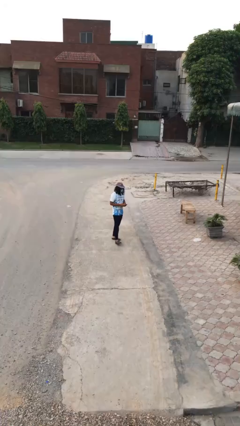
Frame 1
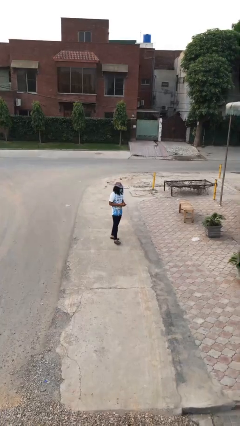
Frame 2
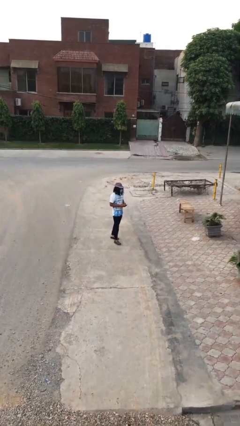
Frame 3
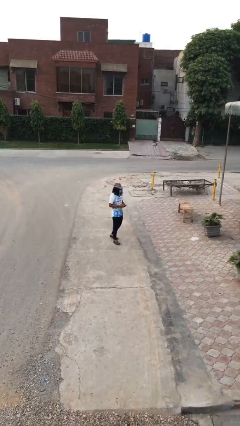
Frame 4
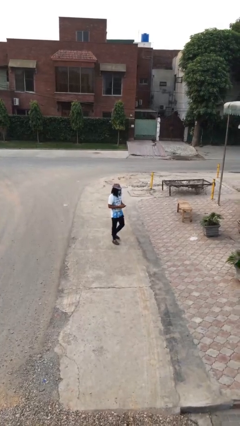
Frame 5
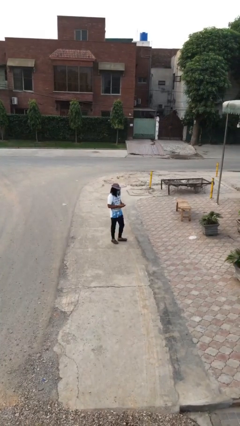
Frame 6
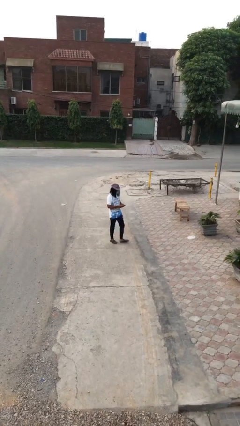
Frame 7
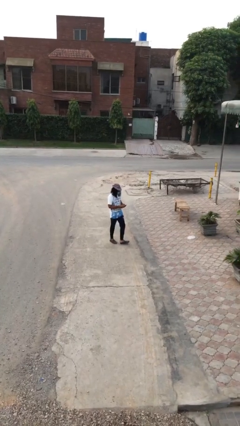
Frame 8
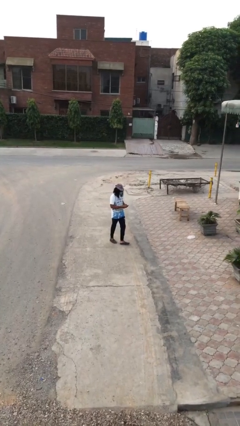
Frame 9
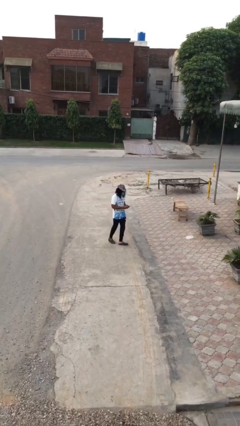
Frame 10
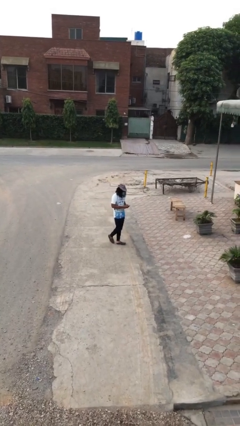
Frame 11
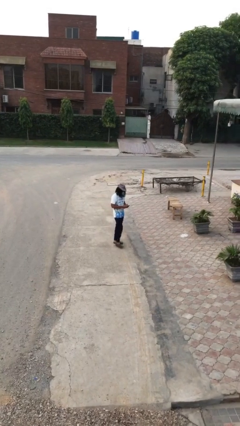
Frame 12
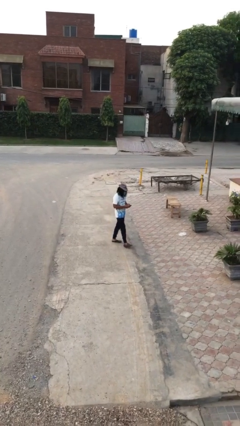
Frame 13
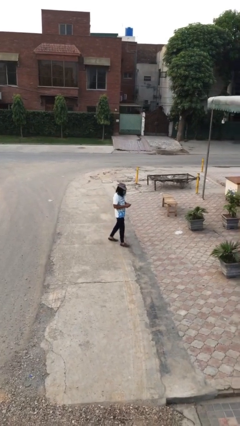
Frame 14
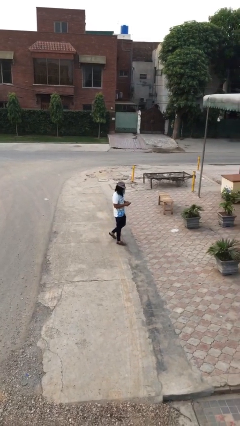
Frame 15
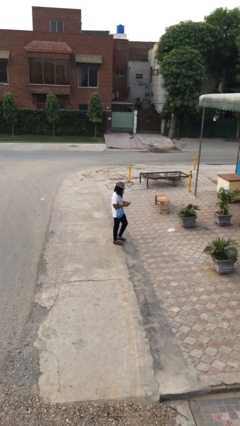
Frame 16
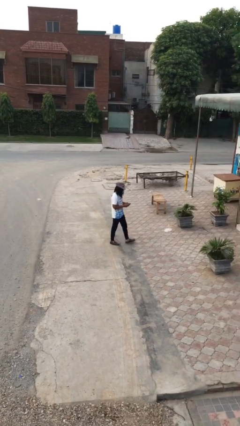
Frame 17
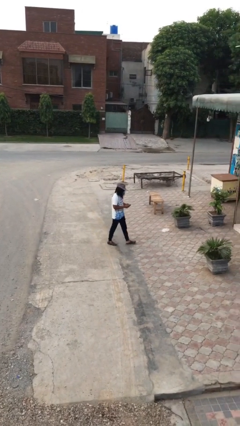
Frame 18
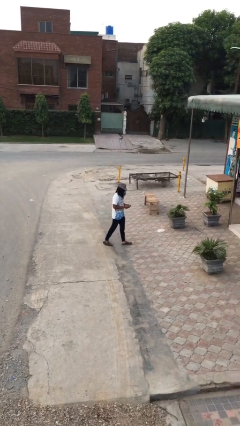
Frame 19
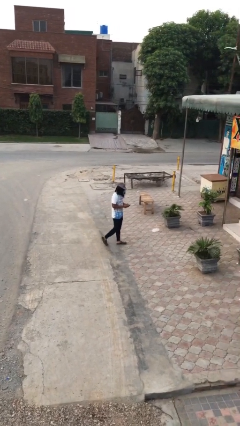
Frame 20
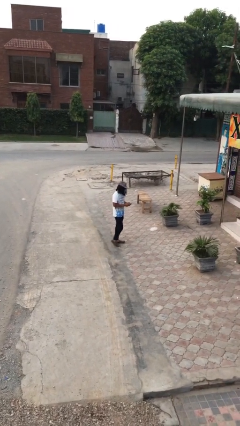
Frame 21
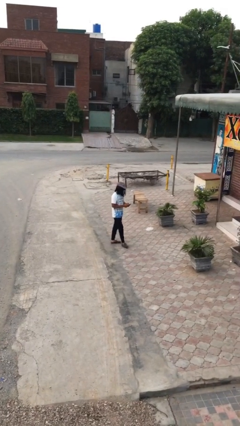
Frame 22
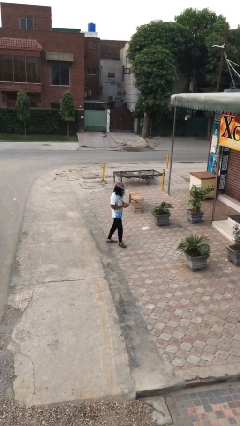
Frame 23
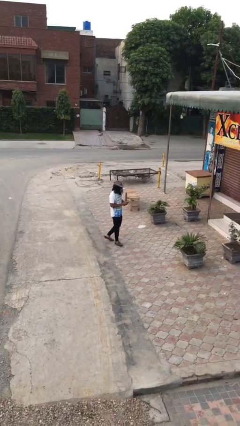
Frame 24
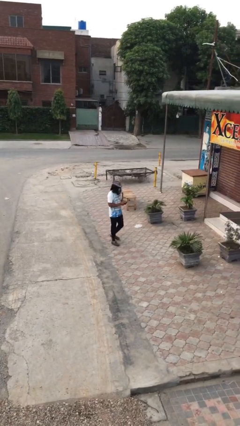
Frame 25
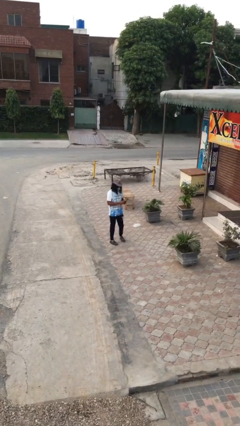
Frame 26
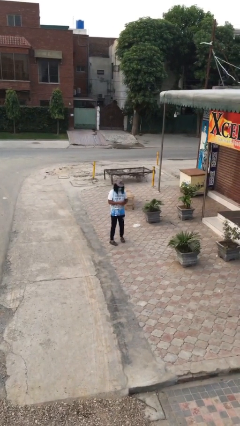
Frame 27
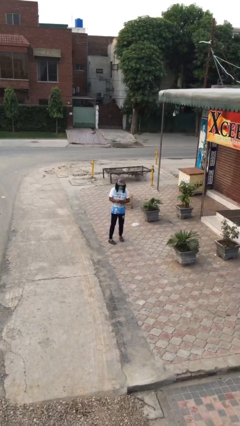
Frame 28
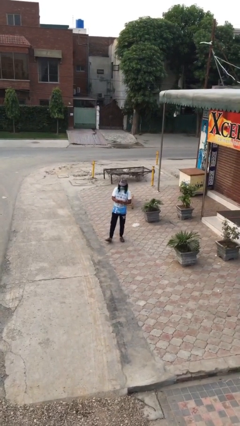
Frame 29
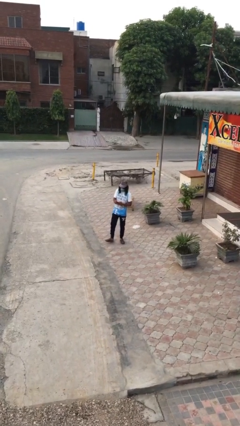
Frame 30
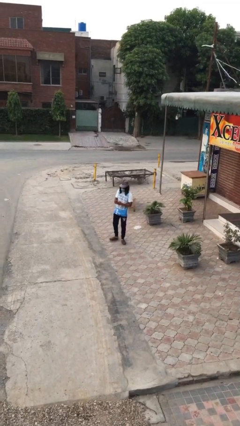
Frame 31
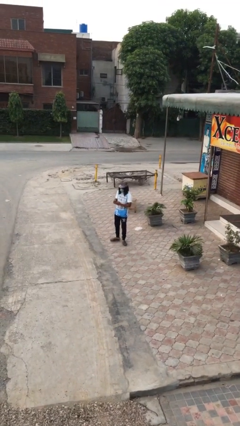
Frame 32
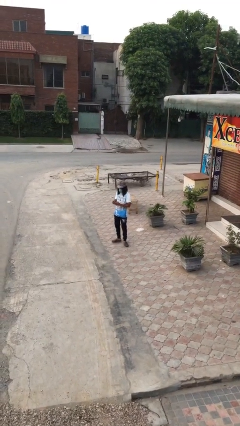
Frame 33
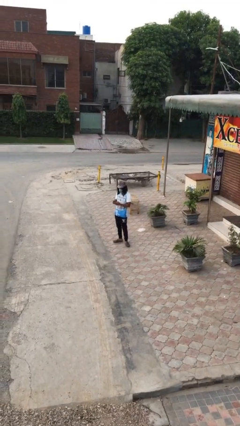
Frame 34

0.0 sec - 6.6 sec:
person texts on phone

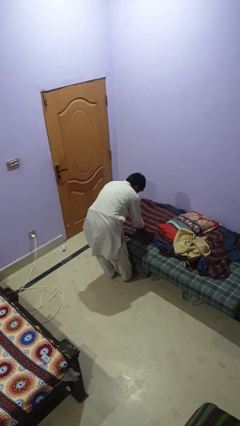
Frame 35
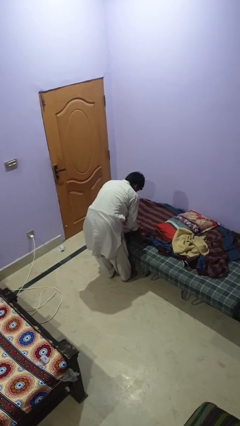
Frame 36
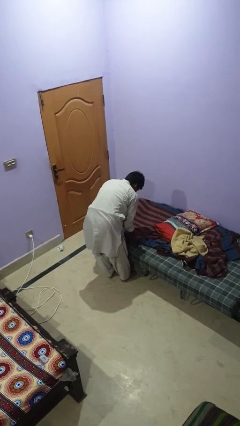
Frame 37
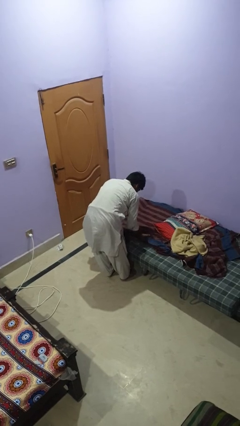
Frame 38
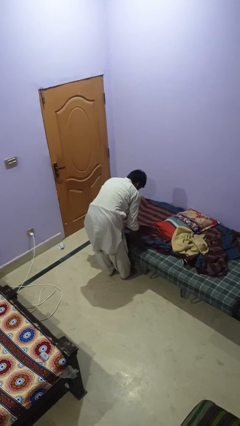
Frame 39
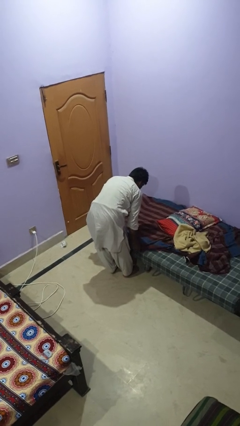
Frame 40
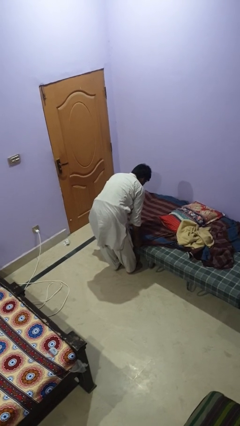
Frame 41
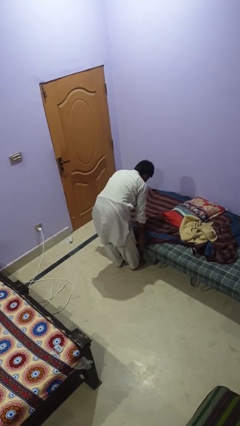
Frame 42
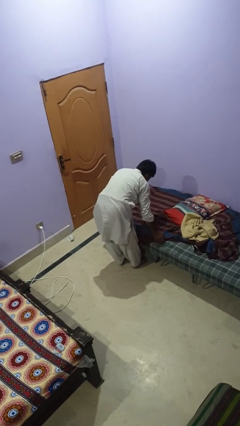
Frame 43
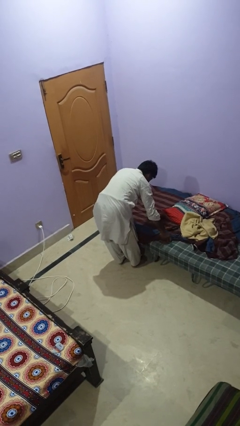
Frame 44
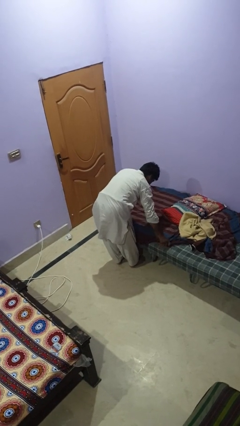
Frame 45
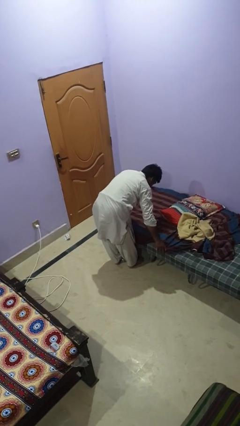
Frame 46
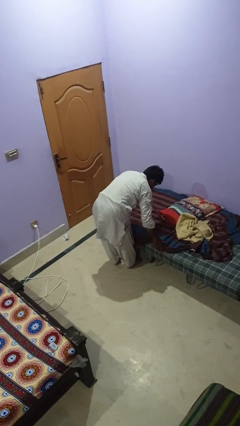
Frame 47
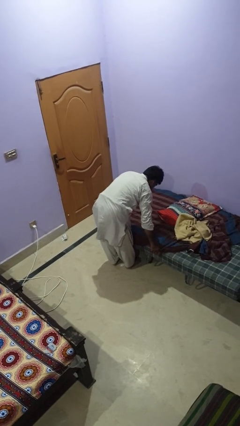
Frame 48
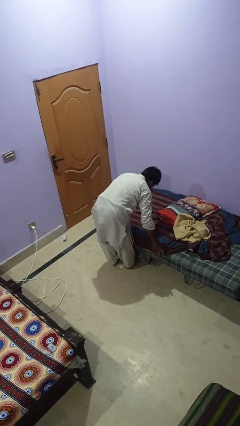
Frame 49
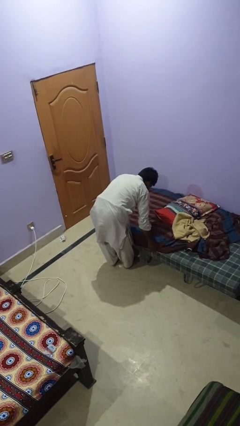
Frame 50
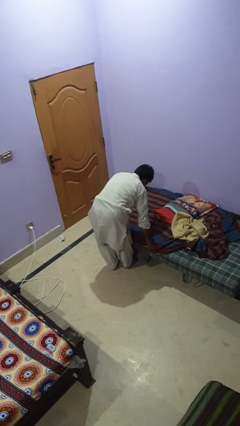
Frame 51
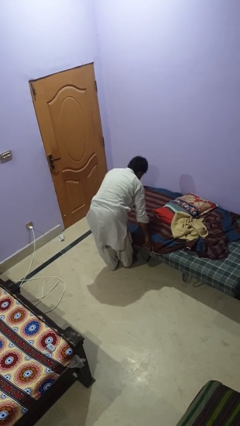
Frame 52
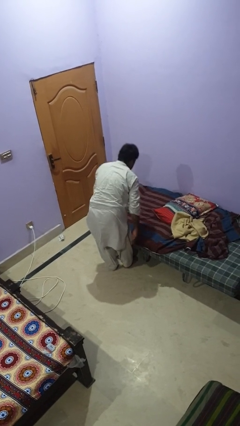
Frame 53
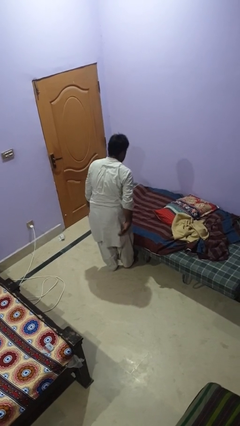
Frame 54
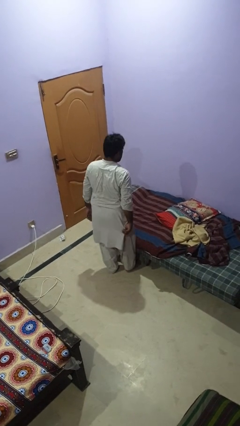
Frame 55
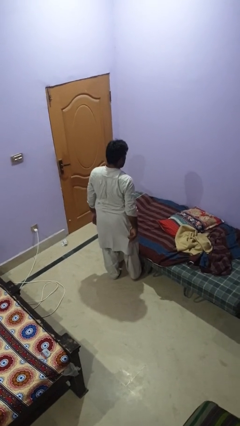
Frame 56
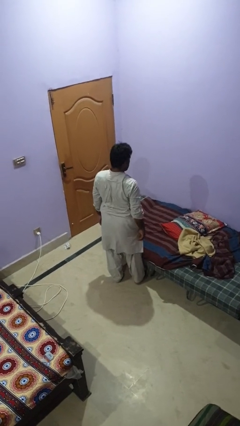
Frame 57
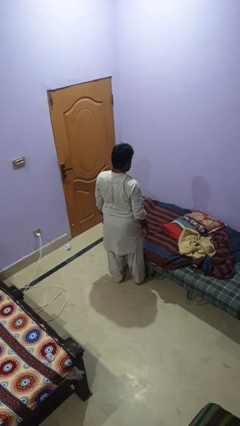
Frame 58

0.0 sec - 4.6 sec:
person makes bed

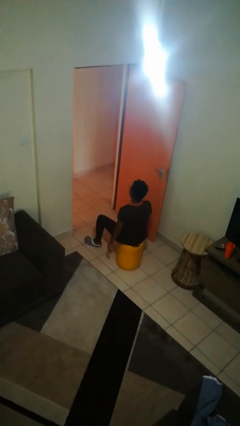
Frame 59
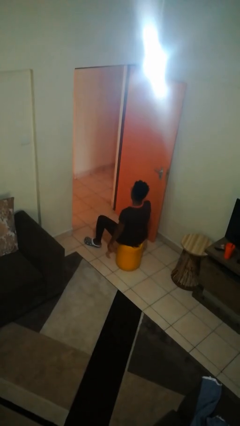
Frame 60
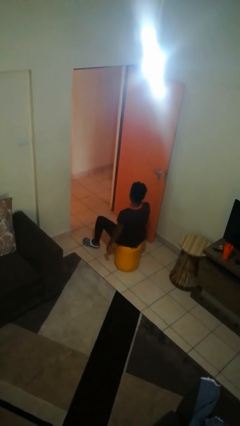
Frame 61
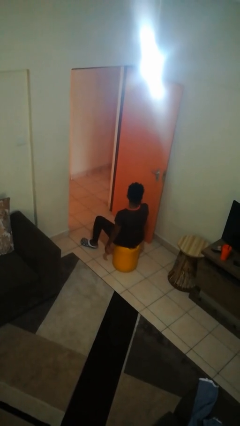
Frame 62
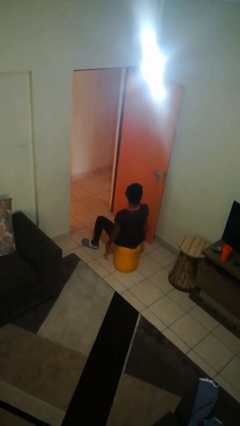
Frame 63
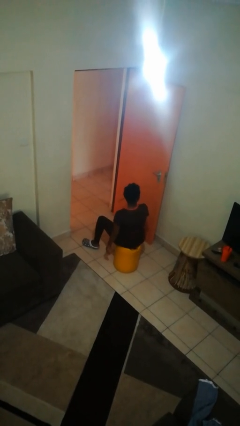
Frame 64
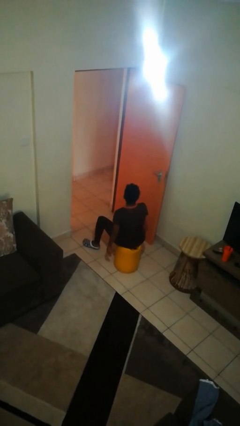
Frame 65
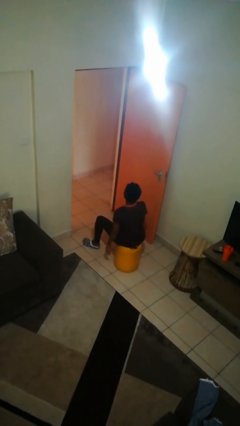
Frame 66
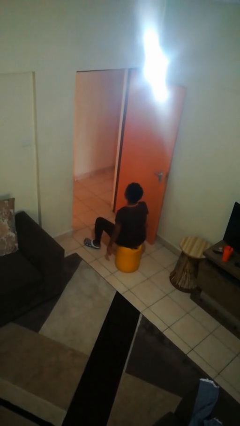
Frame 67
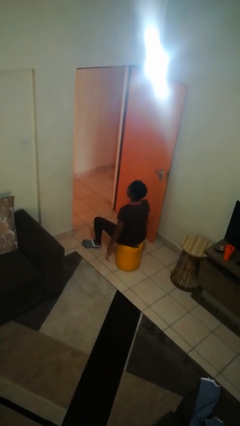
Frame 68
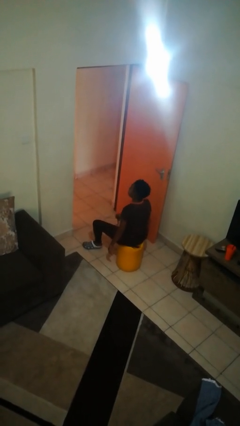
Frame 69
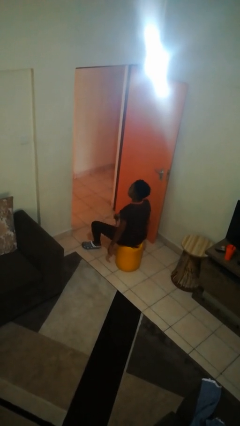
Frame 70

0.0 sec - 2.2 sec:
person takes off glasses

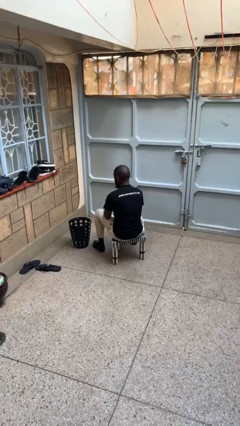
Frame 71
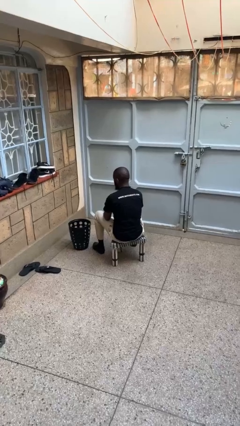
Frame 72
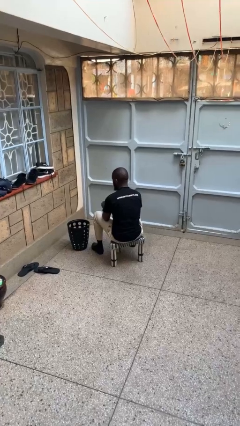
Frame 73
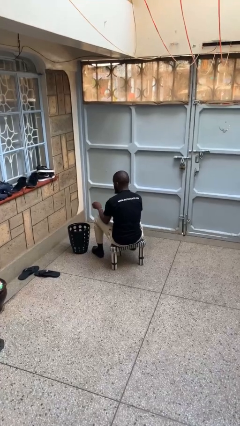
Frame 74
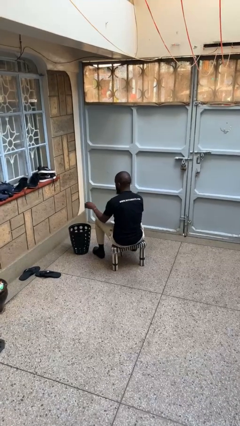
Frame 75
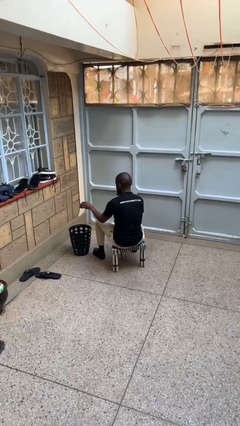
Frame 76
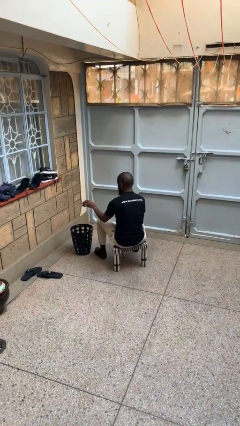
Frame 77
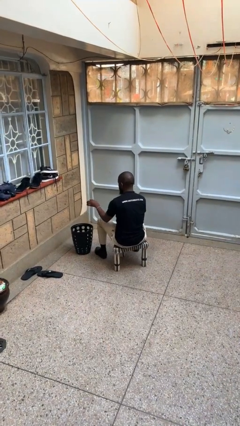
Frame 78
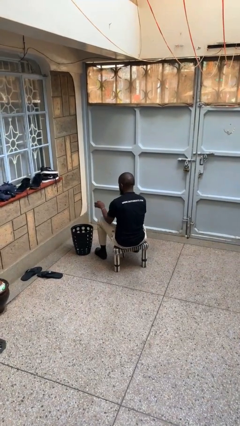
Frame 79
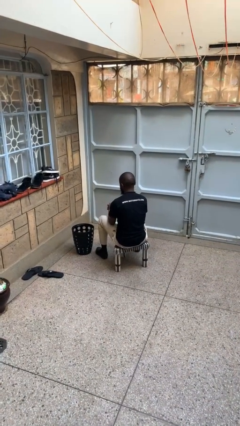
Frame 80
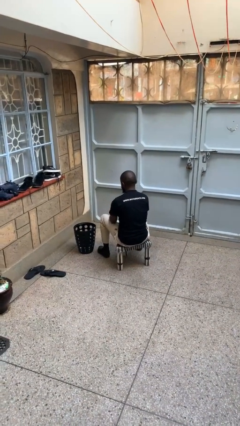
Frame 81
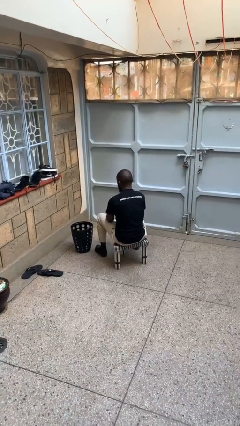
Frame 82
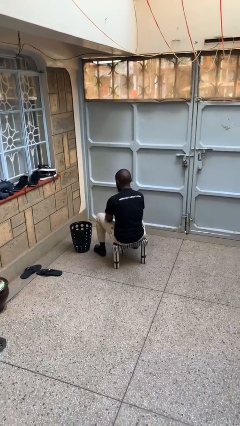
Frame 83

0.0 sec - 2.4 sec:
person discards trash

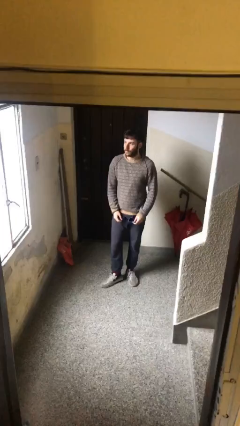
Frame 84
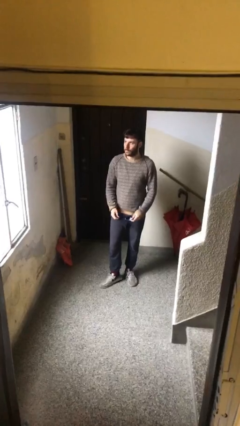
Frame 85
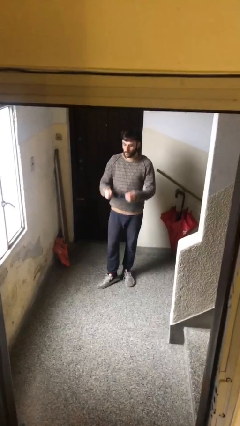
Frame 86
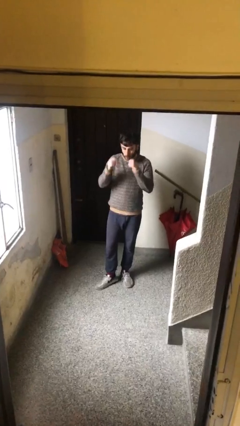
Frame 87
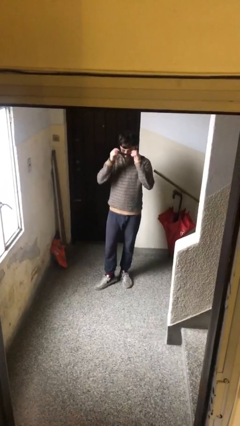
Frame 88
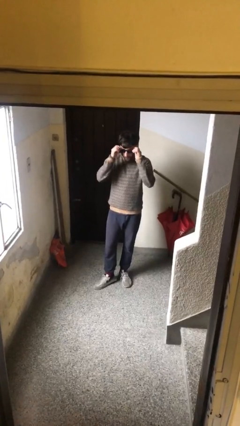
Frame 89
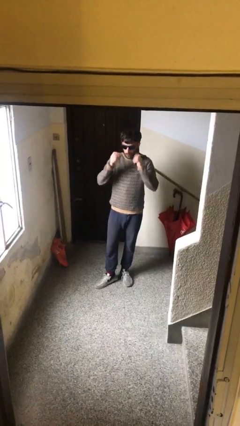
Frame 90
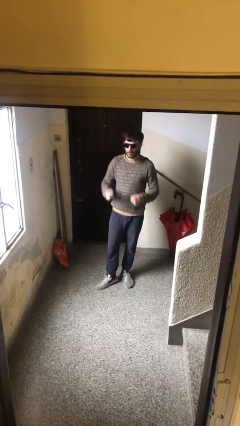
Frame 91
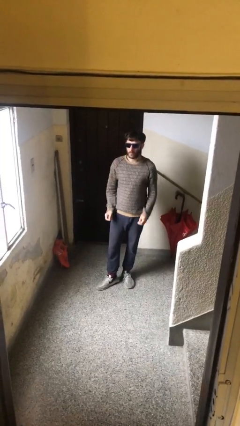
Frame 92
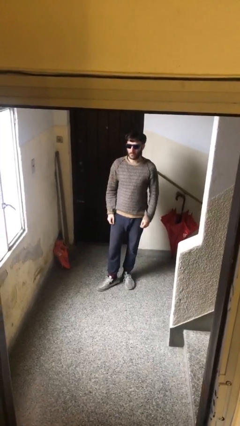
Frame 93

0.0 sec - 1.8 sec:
person puts on sunglasses

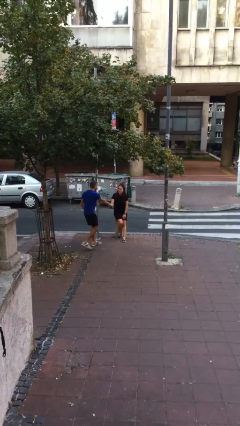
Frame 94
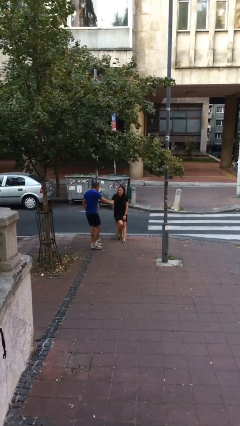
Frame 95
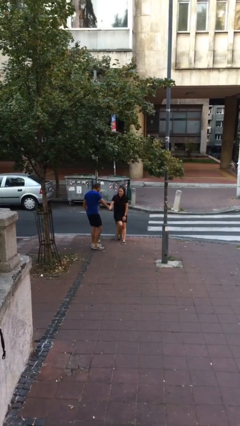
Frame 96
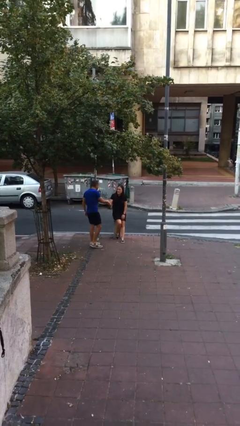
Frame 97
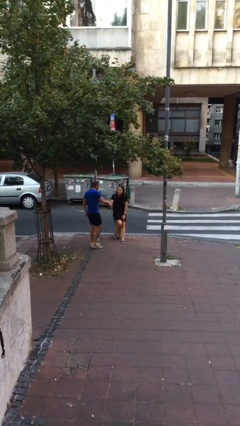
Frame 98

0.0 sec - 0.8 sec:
person shakes hand
